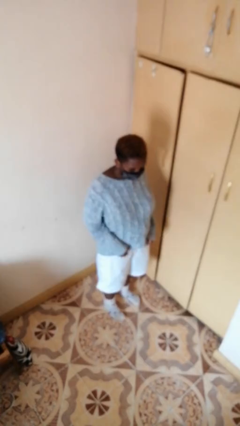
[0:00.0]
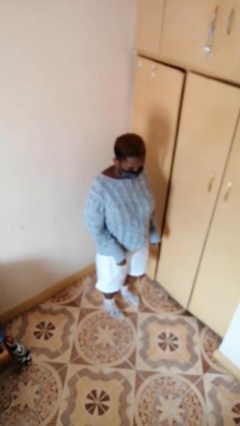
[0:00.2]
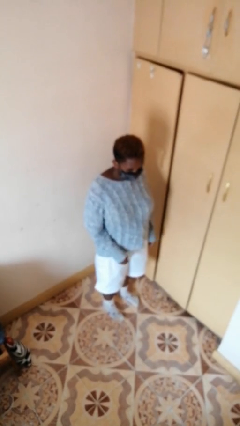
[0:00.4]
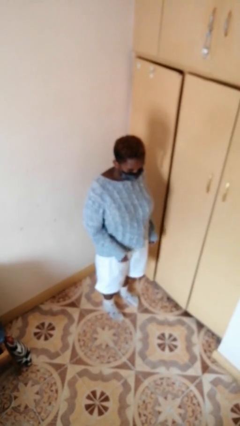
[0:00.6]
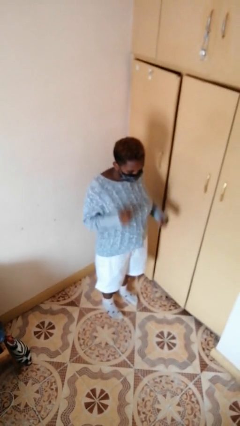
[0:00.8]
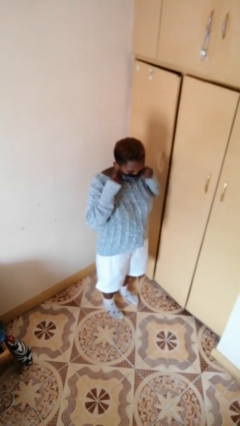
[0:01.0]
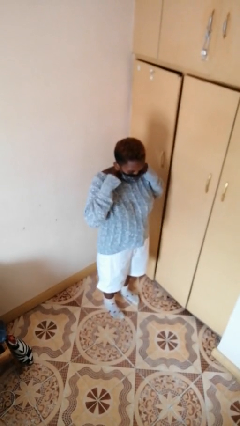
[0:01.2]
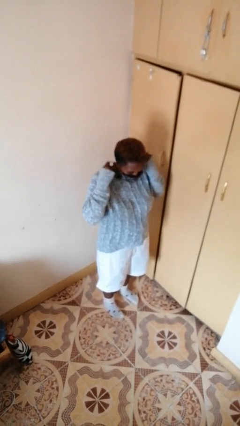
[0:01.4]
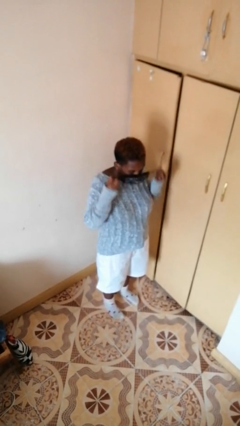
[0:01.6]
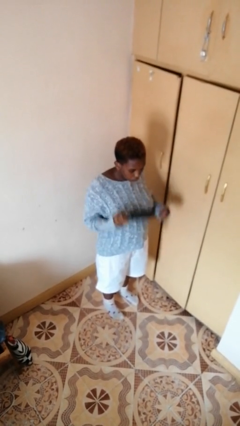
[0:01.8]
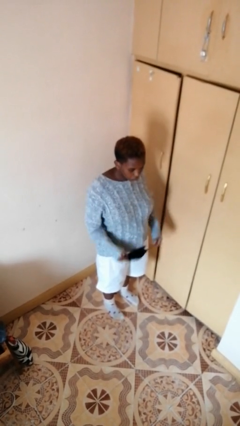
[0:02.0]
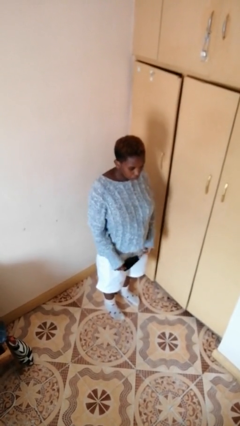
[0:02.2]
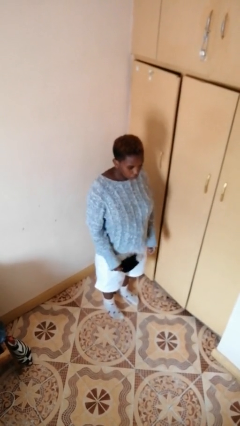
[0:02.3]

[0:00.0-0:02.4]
person takes off facemask

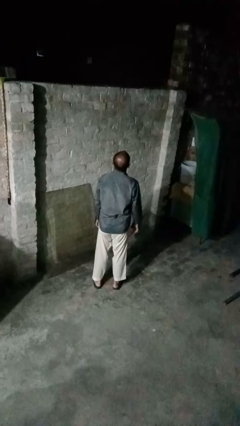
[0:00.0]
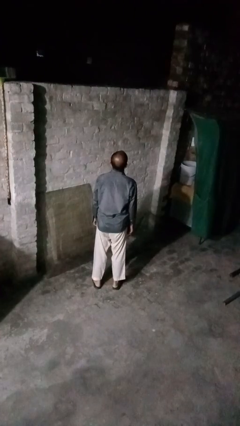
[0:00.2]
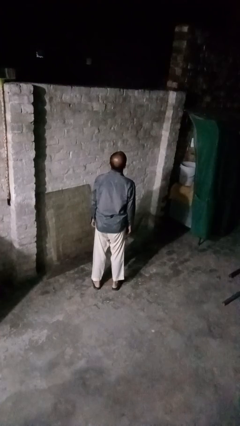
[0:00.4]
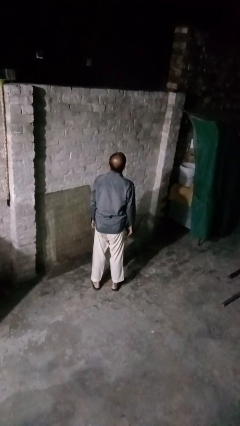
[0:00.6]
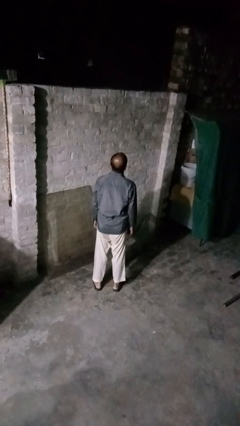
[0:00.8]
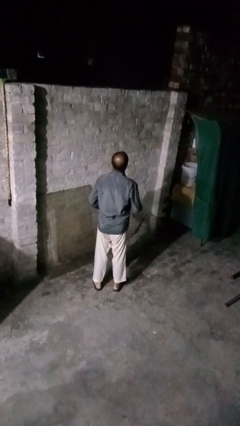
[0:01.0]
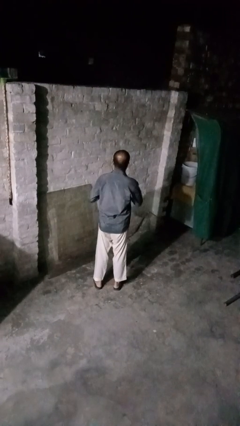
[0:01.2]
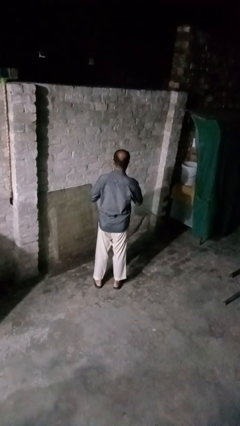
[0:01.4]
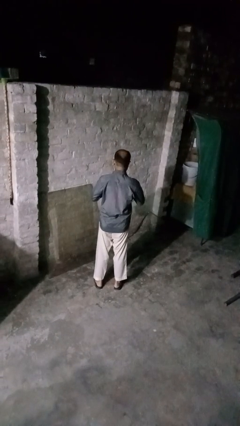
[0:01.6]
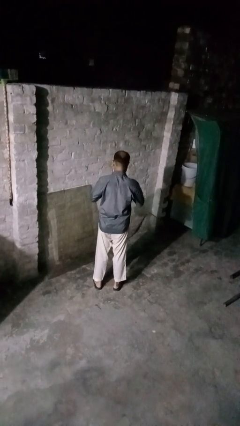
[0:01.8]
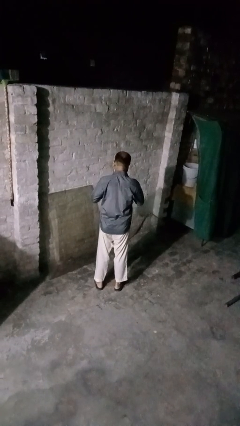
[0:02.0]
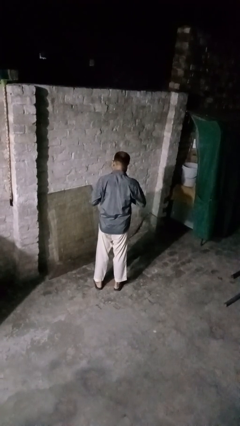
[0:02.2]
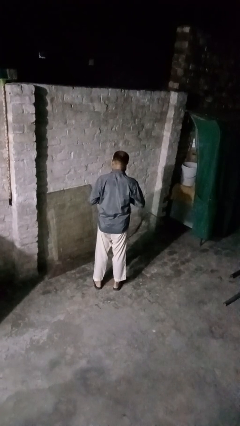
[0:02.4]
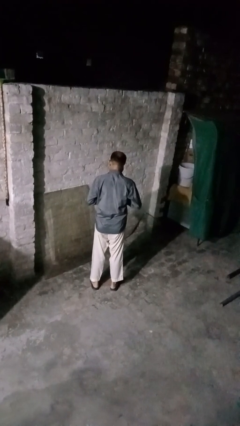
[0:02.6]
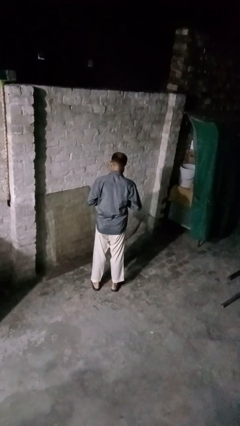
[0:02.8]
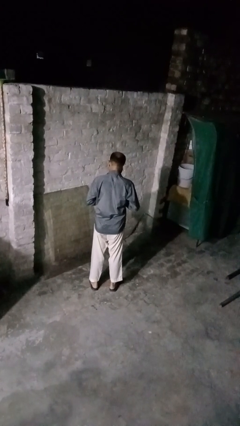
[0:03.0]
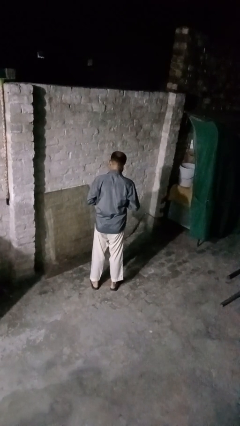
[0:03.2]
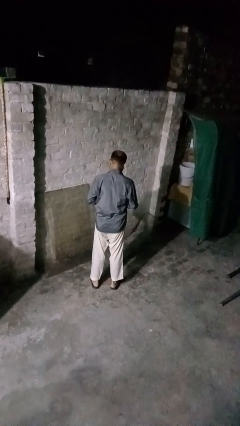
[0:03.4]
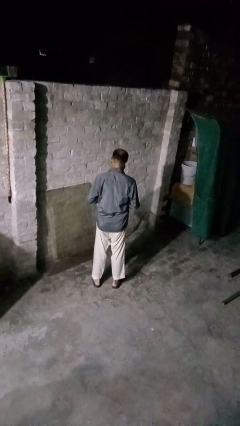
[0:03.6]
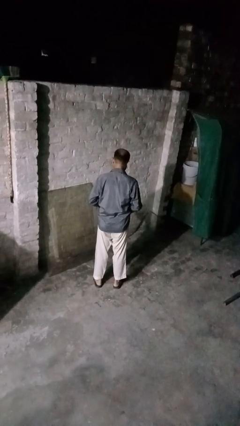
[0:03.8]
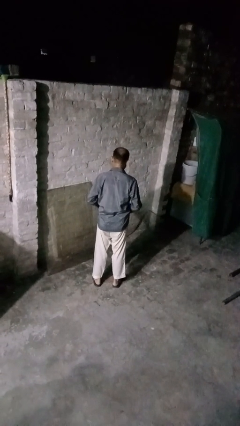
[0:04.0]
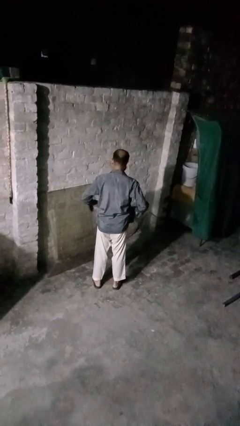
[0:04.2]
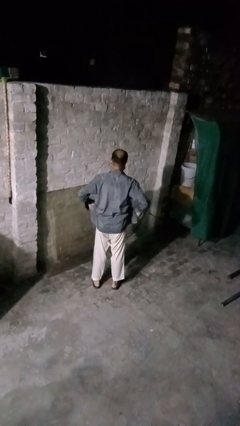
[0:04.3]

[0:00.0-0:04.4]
person unbuttons shirt

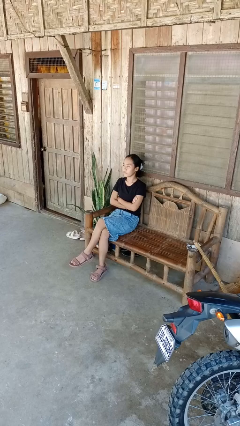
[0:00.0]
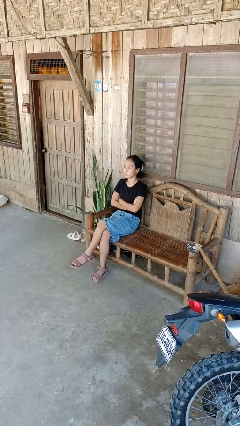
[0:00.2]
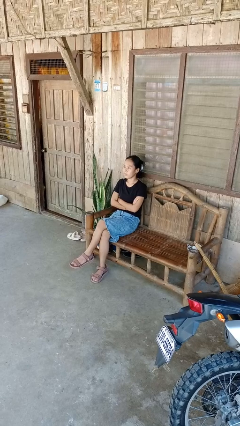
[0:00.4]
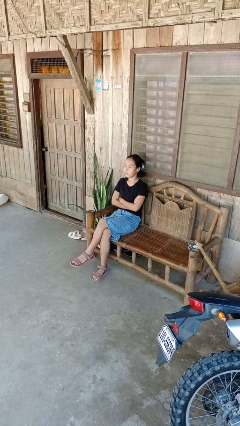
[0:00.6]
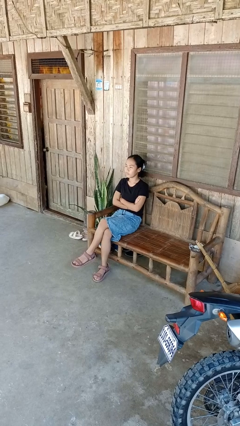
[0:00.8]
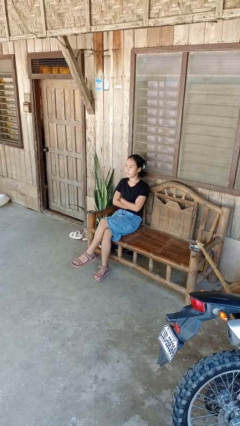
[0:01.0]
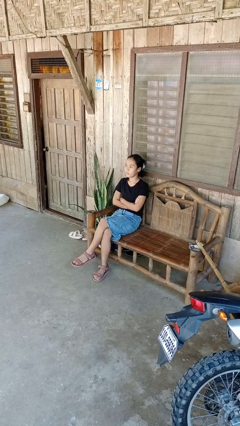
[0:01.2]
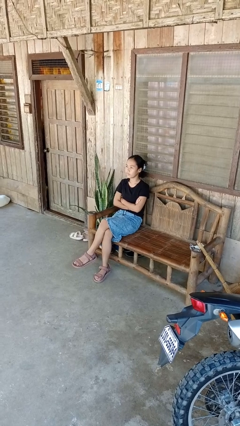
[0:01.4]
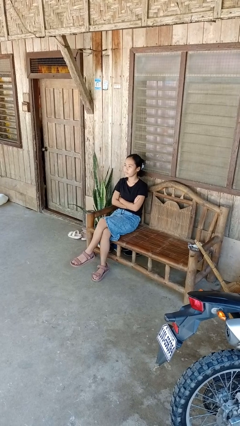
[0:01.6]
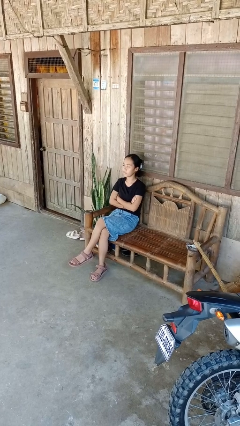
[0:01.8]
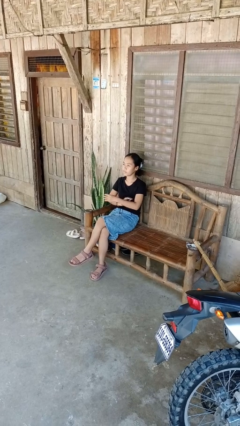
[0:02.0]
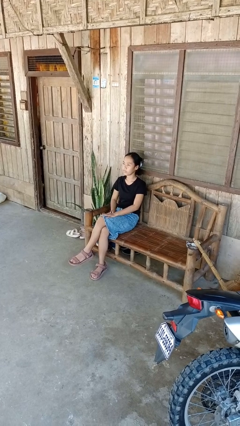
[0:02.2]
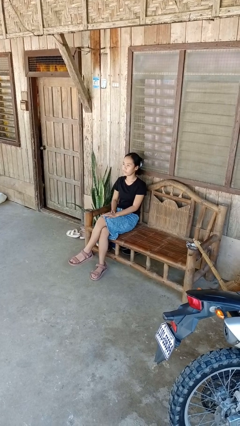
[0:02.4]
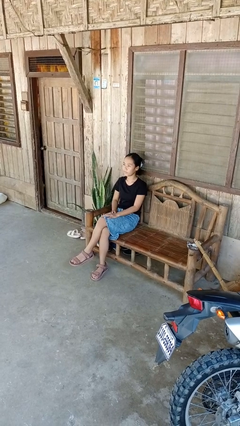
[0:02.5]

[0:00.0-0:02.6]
person crosses arms

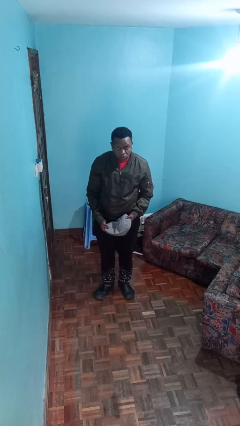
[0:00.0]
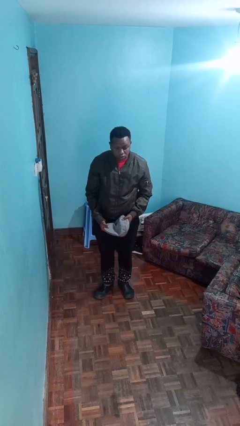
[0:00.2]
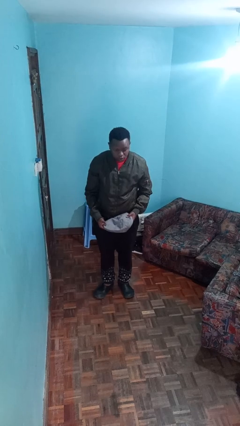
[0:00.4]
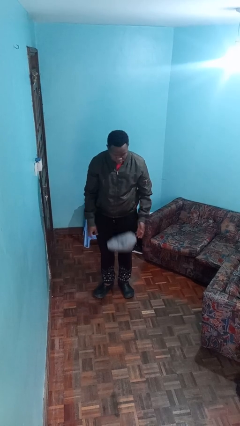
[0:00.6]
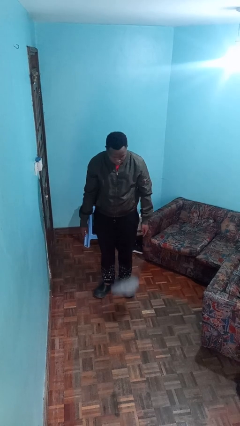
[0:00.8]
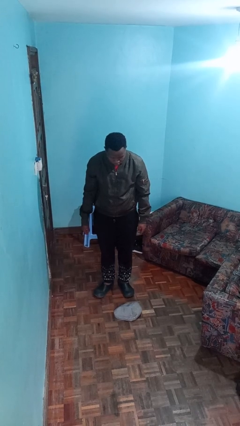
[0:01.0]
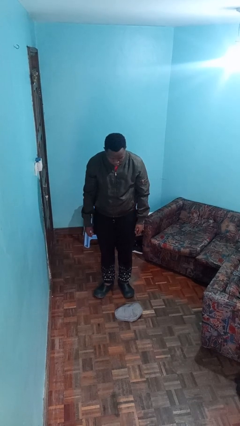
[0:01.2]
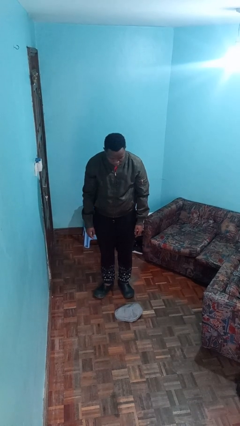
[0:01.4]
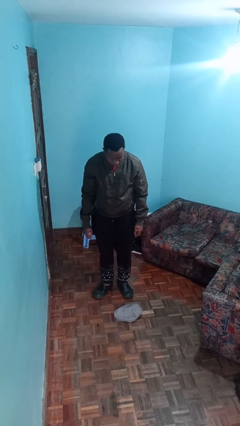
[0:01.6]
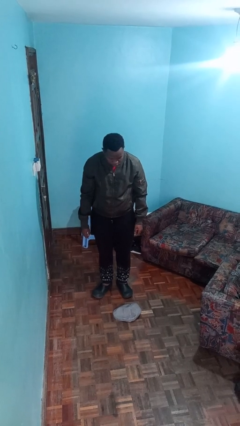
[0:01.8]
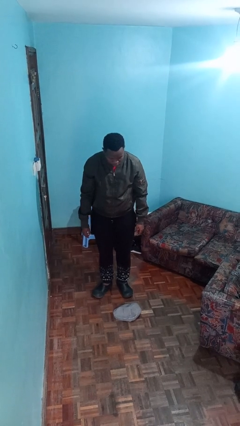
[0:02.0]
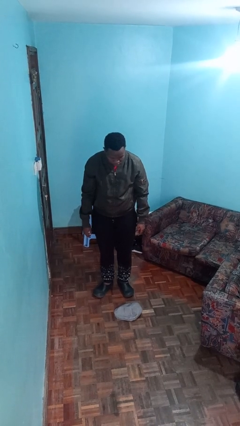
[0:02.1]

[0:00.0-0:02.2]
person drops object

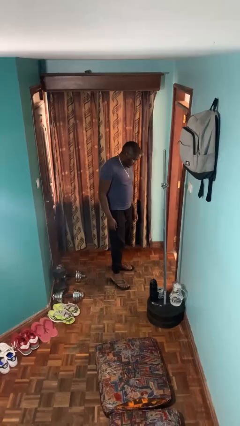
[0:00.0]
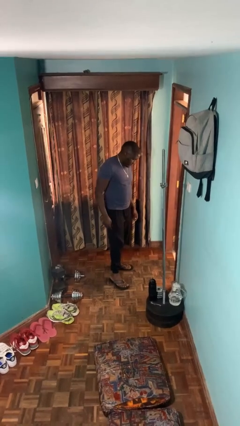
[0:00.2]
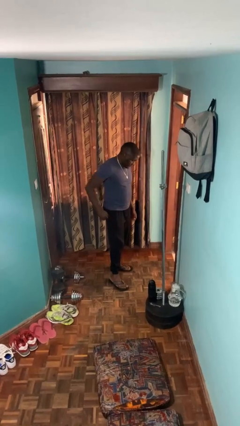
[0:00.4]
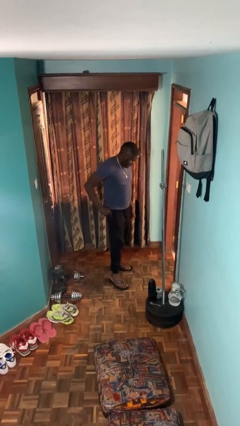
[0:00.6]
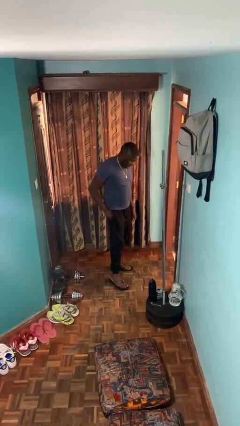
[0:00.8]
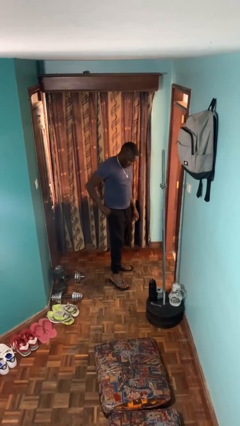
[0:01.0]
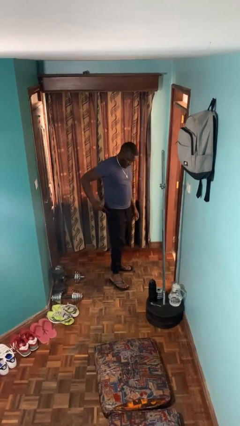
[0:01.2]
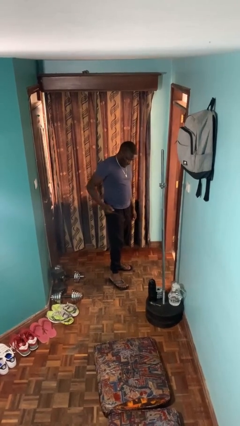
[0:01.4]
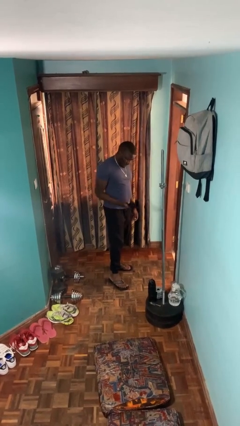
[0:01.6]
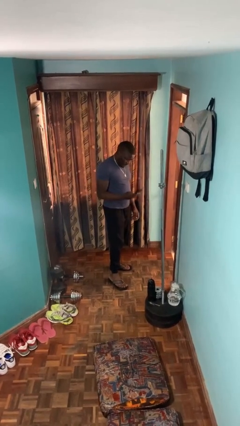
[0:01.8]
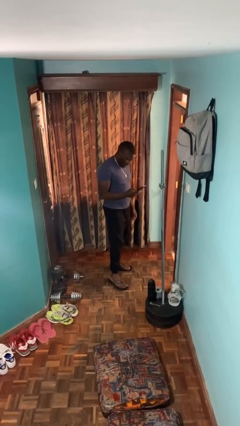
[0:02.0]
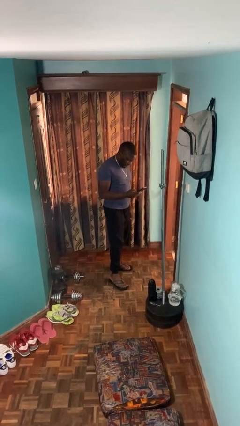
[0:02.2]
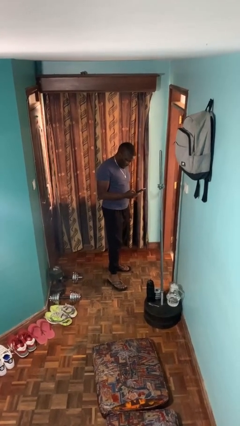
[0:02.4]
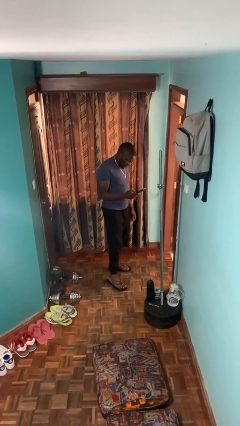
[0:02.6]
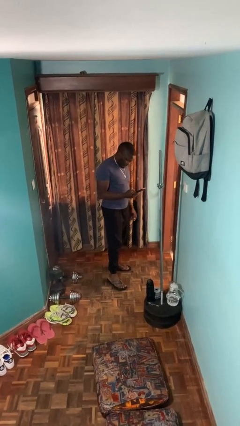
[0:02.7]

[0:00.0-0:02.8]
person takes phone from pocket

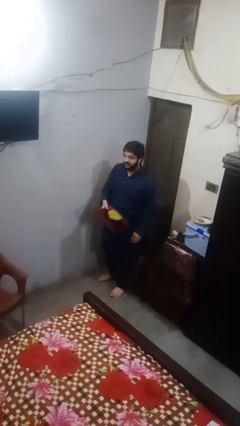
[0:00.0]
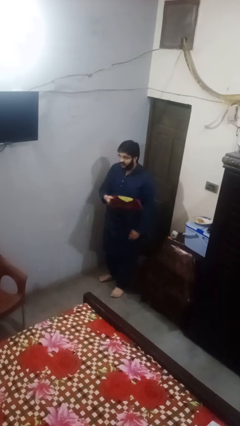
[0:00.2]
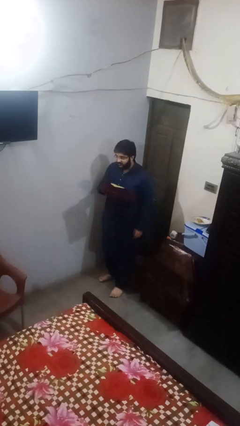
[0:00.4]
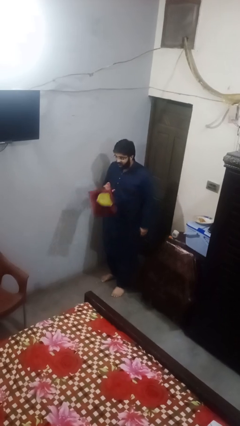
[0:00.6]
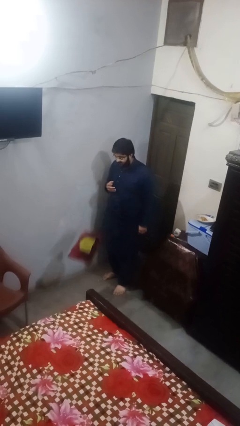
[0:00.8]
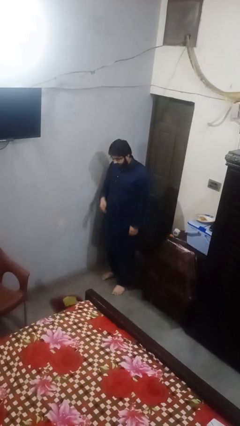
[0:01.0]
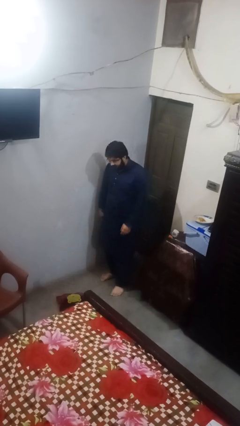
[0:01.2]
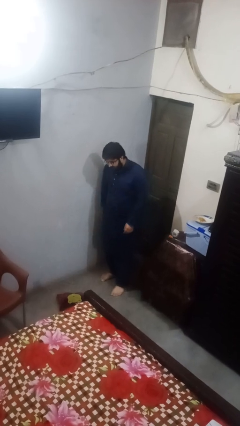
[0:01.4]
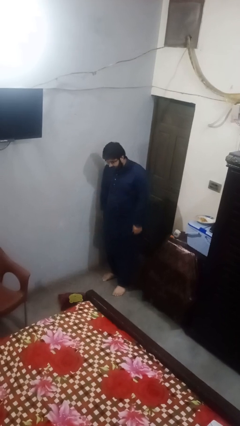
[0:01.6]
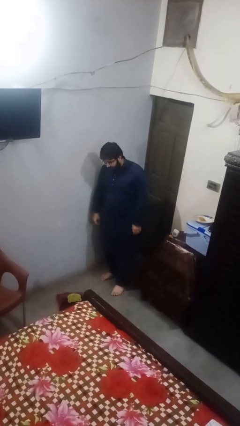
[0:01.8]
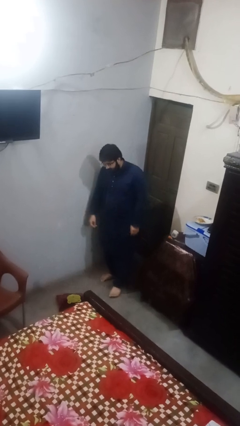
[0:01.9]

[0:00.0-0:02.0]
person throws object to ground

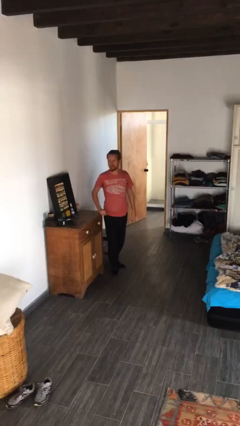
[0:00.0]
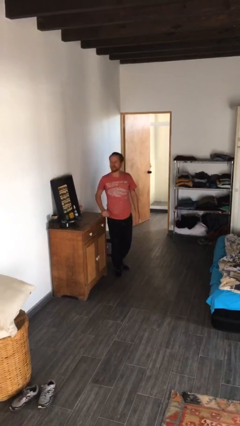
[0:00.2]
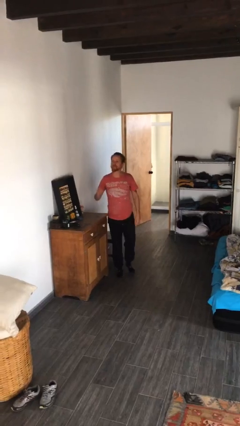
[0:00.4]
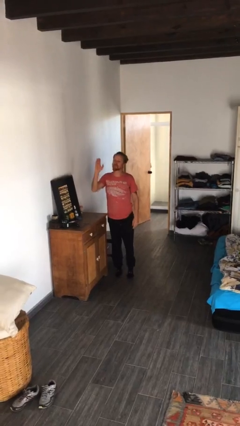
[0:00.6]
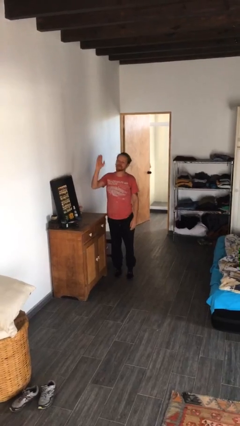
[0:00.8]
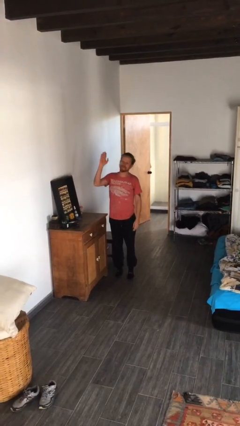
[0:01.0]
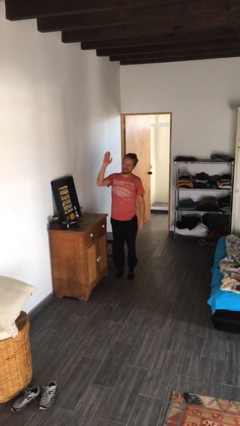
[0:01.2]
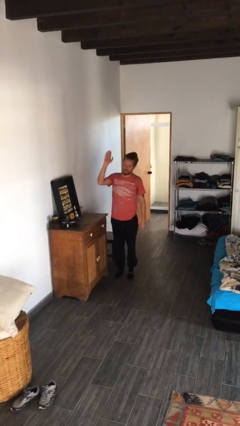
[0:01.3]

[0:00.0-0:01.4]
person gestures raise hand
